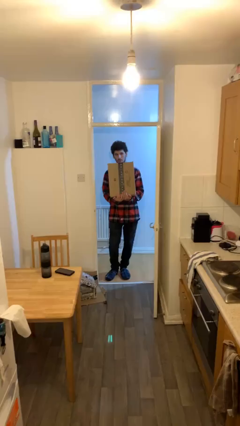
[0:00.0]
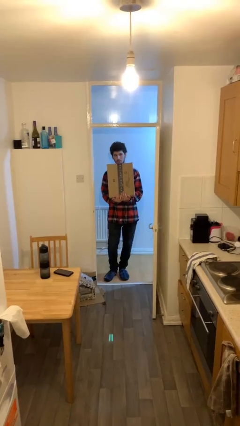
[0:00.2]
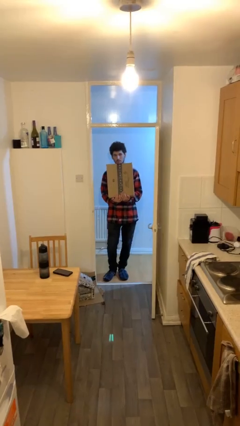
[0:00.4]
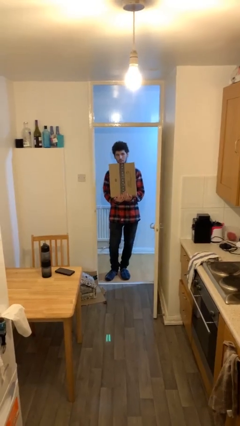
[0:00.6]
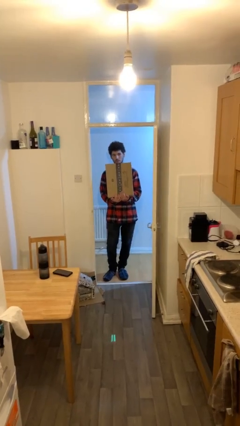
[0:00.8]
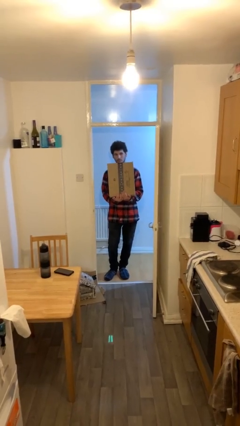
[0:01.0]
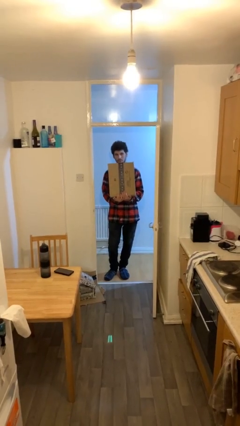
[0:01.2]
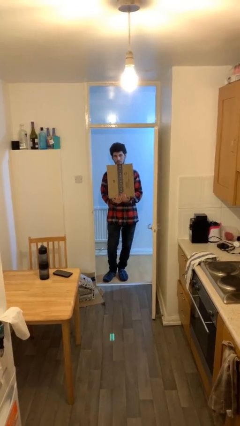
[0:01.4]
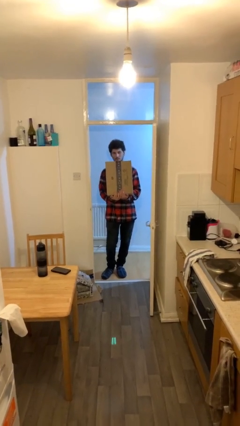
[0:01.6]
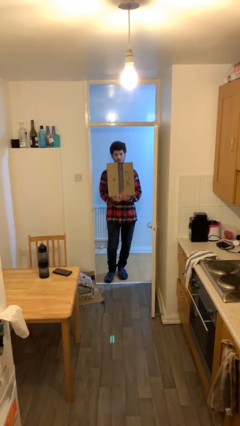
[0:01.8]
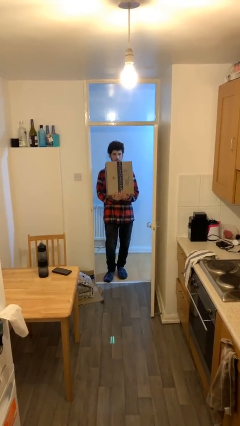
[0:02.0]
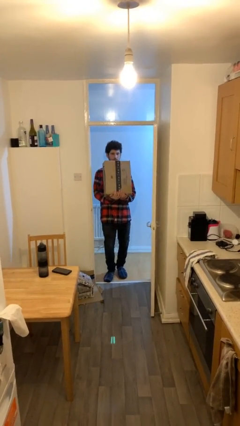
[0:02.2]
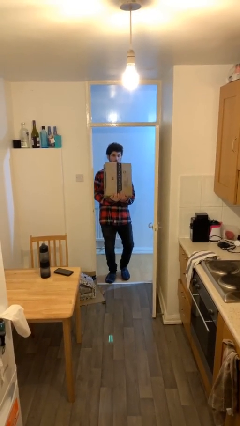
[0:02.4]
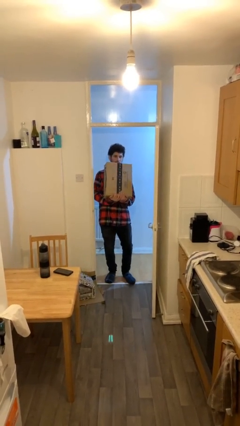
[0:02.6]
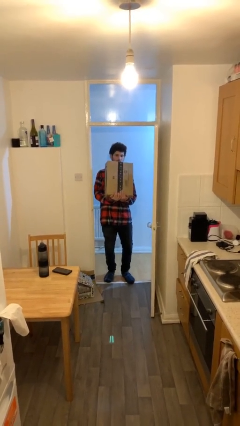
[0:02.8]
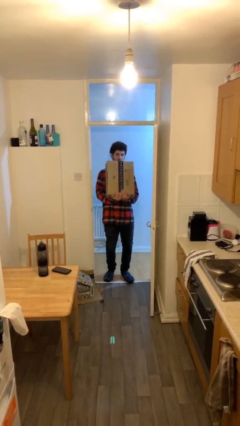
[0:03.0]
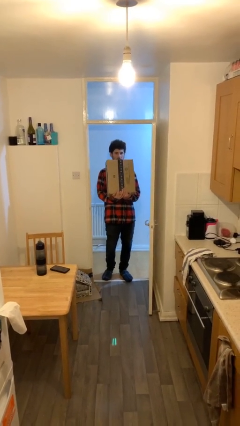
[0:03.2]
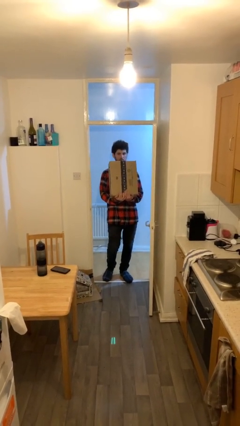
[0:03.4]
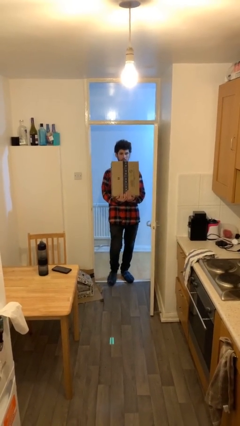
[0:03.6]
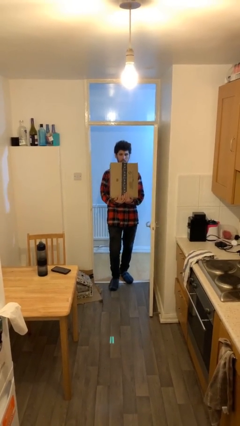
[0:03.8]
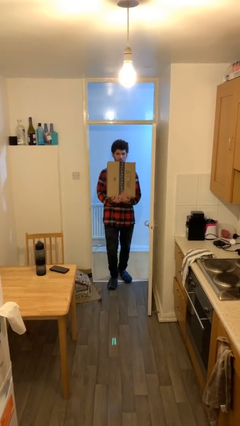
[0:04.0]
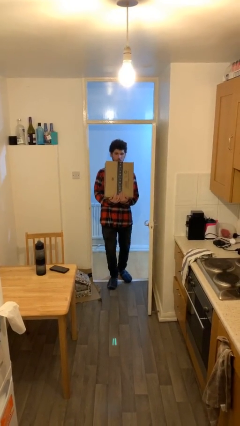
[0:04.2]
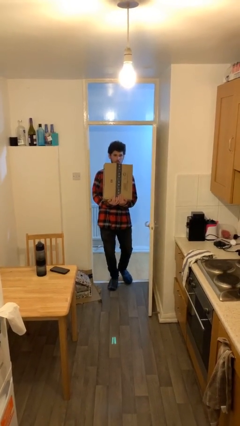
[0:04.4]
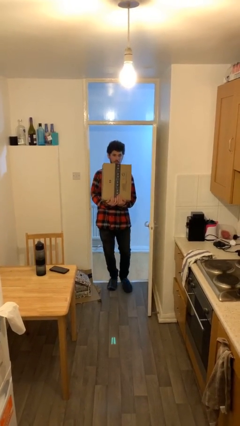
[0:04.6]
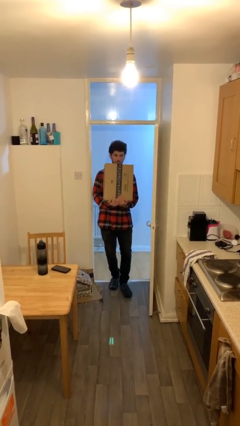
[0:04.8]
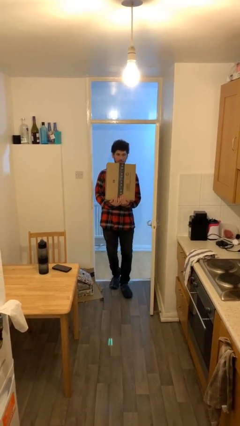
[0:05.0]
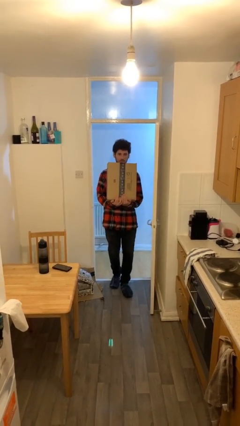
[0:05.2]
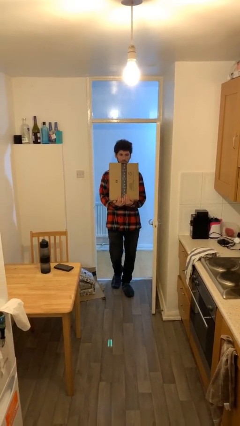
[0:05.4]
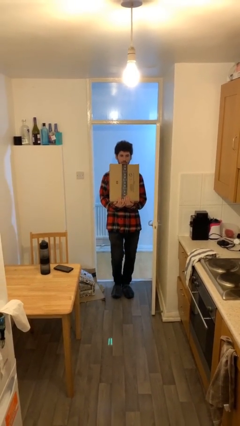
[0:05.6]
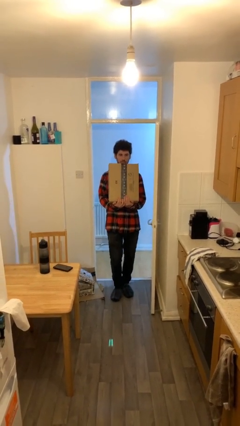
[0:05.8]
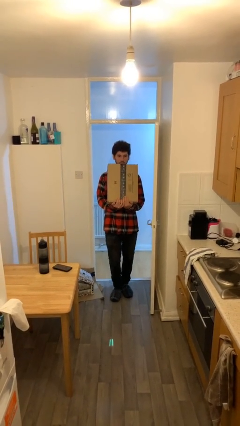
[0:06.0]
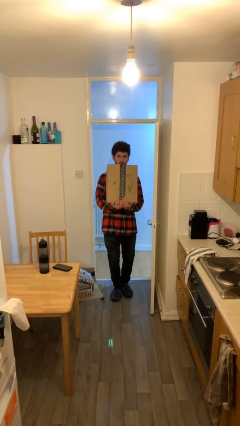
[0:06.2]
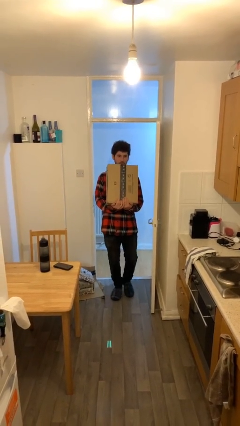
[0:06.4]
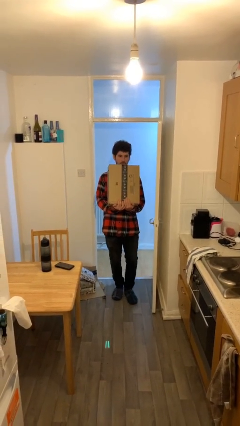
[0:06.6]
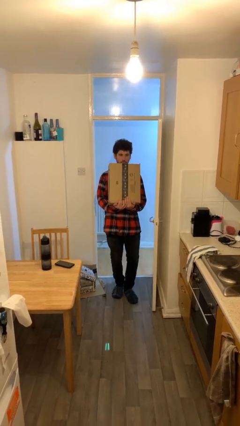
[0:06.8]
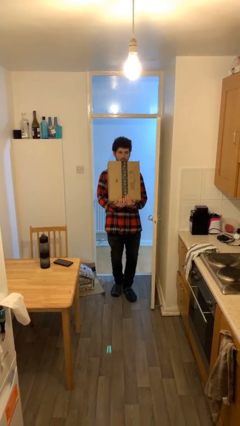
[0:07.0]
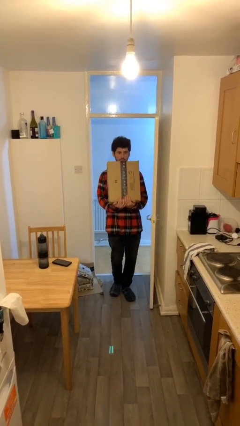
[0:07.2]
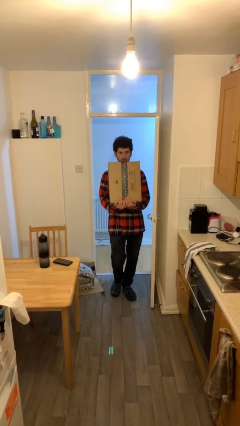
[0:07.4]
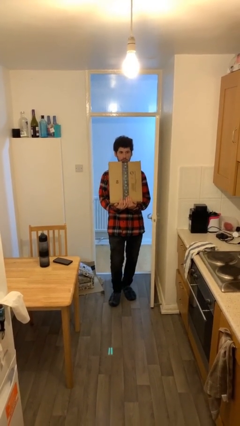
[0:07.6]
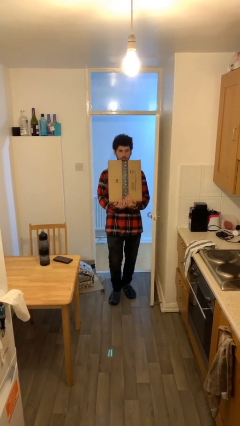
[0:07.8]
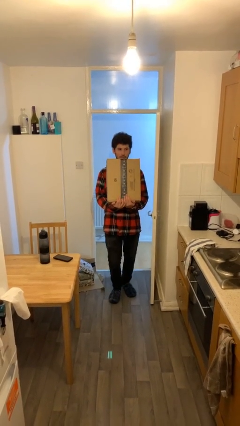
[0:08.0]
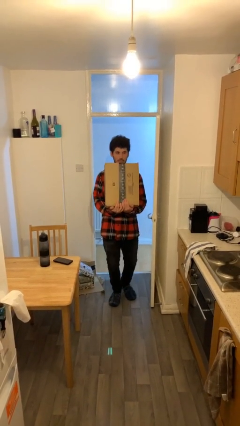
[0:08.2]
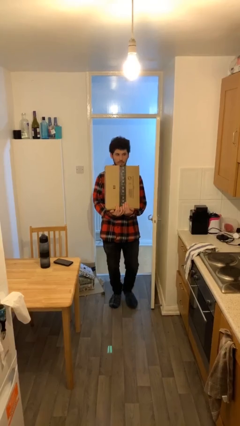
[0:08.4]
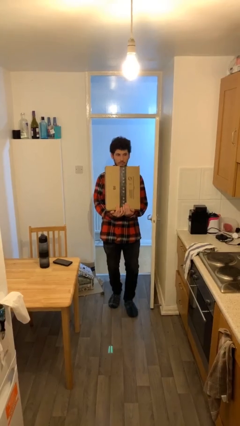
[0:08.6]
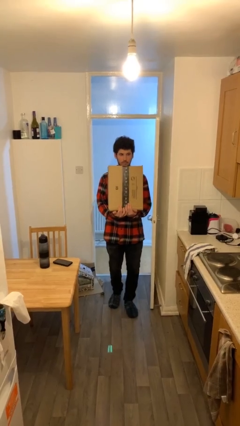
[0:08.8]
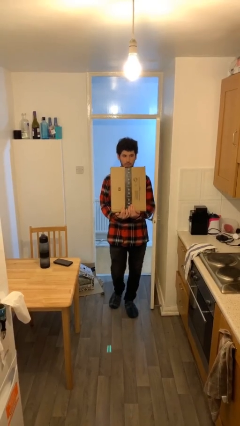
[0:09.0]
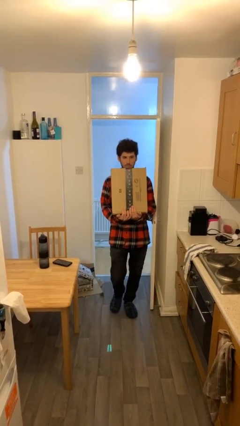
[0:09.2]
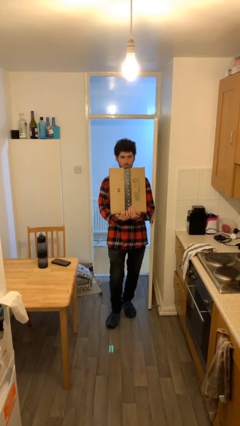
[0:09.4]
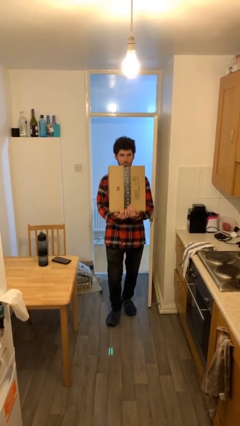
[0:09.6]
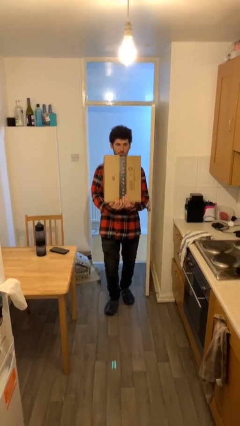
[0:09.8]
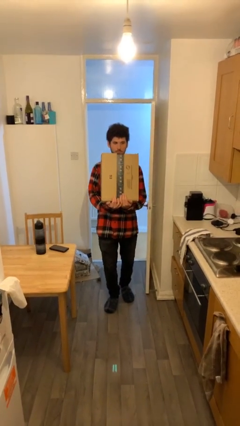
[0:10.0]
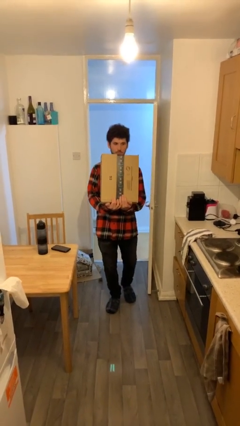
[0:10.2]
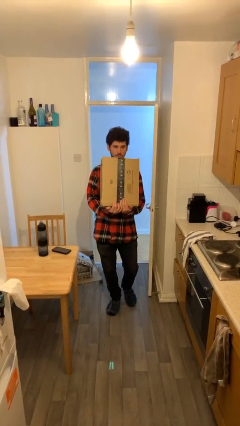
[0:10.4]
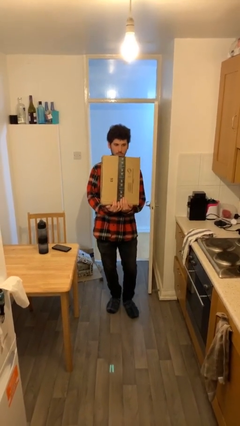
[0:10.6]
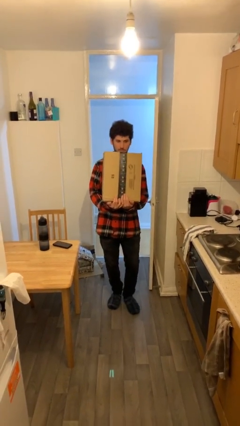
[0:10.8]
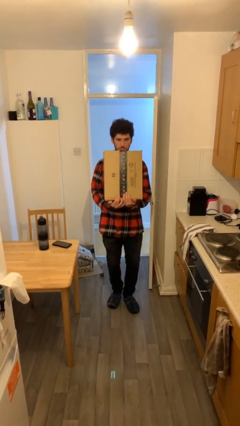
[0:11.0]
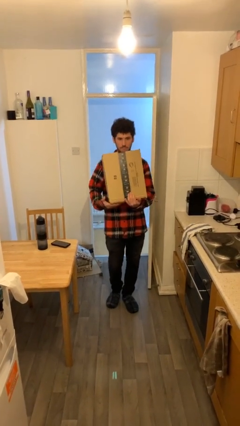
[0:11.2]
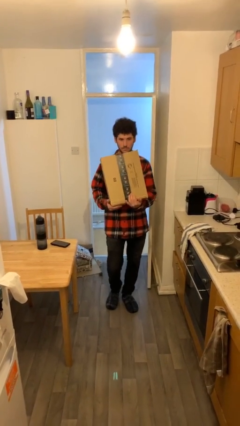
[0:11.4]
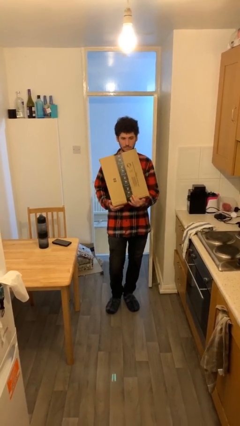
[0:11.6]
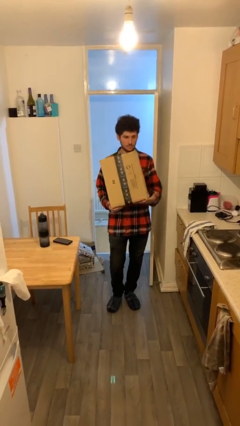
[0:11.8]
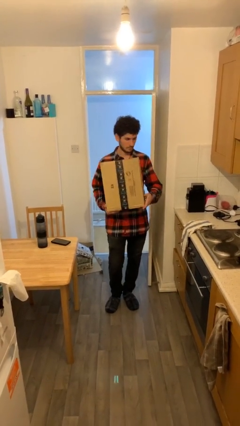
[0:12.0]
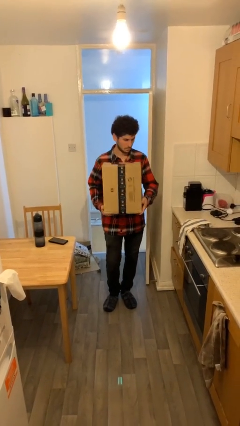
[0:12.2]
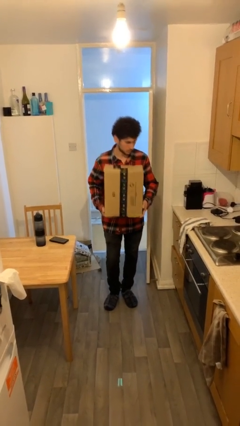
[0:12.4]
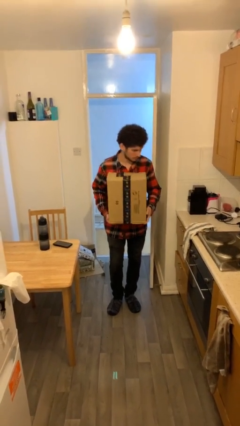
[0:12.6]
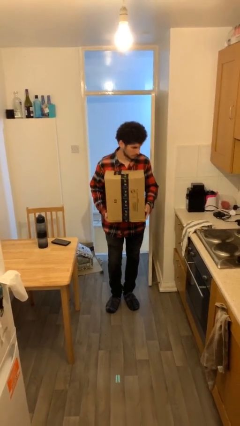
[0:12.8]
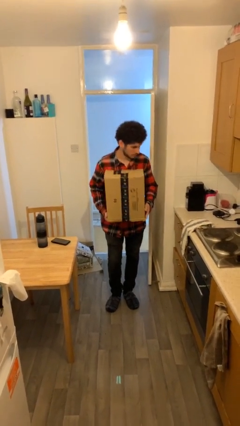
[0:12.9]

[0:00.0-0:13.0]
person carries heavy object

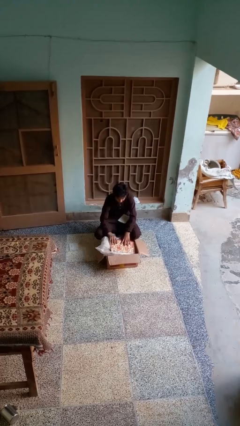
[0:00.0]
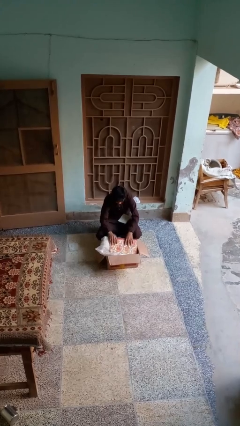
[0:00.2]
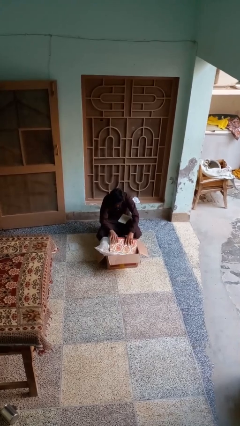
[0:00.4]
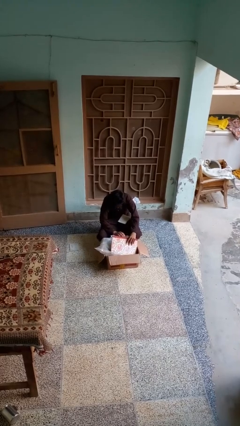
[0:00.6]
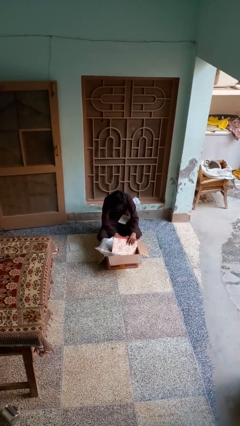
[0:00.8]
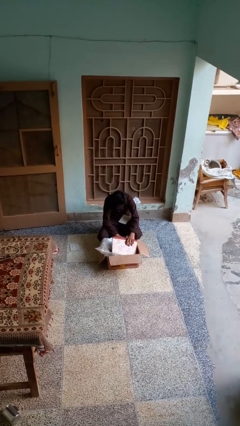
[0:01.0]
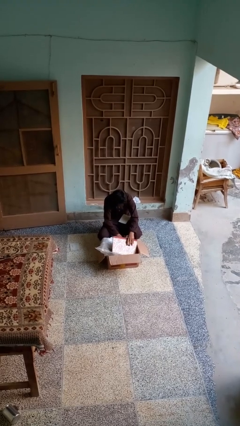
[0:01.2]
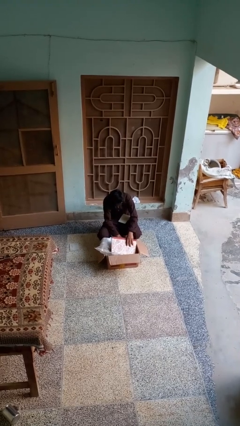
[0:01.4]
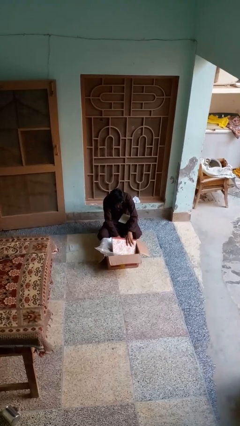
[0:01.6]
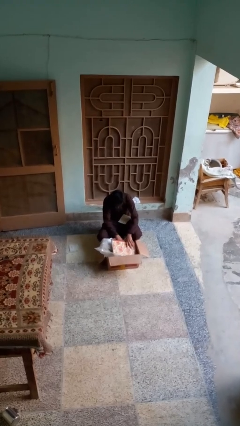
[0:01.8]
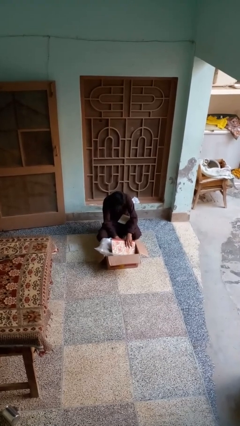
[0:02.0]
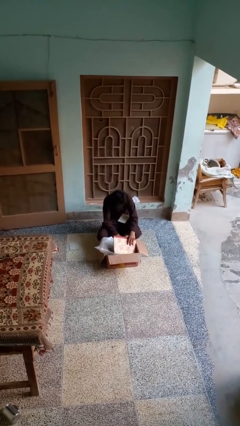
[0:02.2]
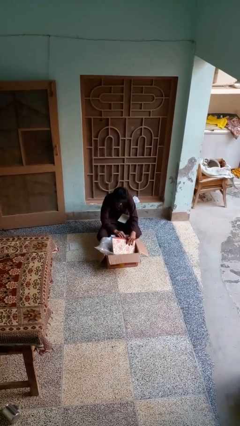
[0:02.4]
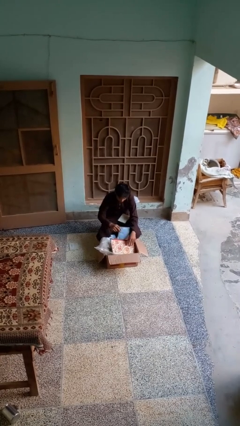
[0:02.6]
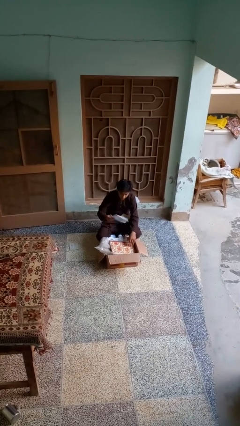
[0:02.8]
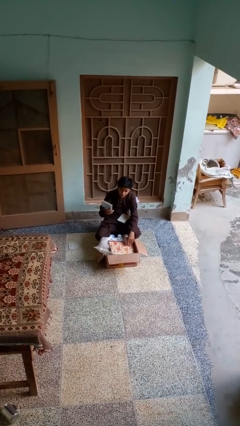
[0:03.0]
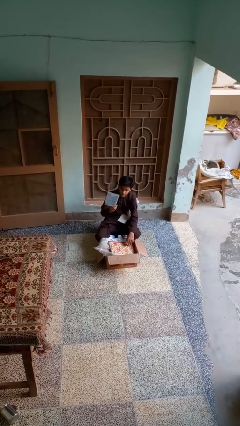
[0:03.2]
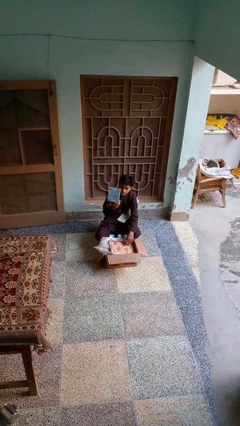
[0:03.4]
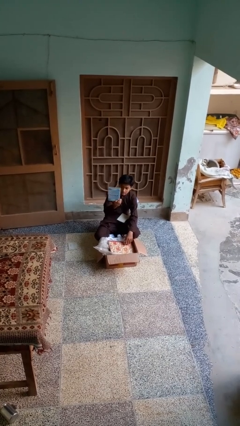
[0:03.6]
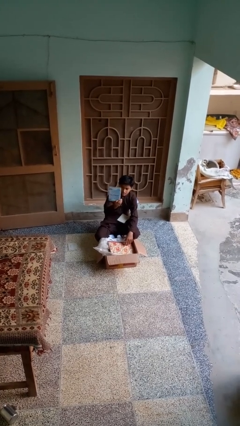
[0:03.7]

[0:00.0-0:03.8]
person takes object from box

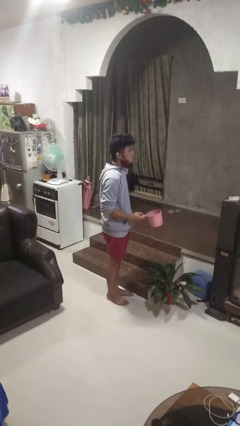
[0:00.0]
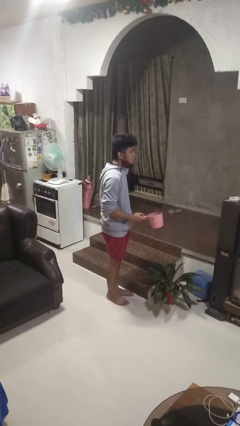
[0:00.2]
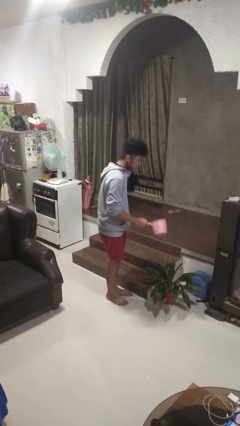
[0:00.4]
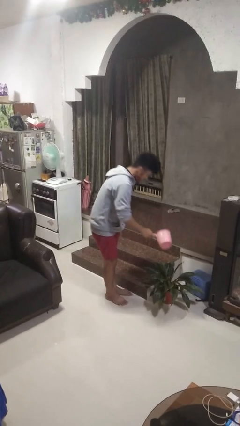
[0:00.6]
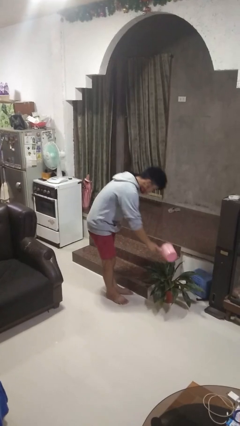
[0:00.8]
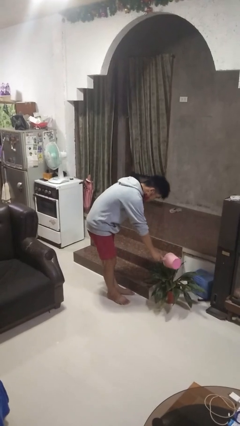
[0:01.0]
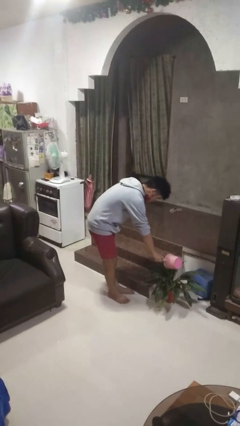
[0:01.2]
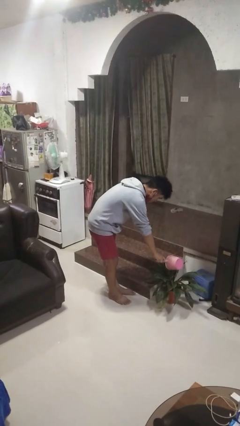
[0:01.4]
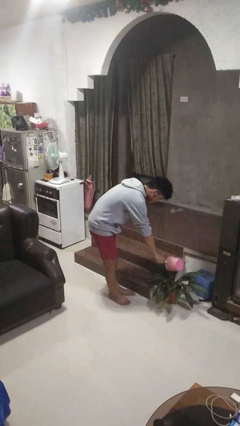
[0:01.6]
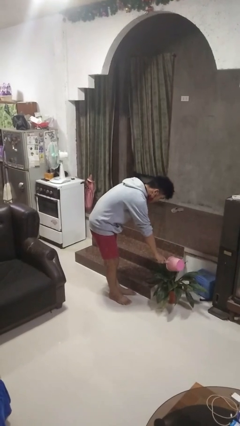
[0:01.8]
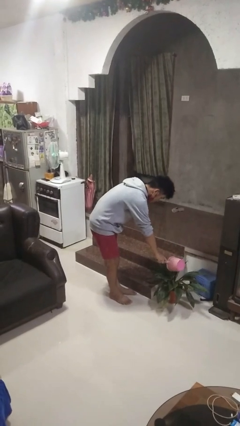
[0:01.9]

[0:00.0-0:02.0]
person waters houseplant
